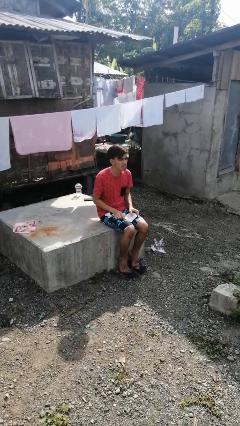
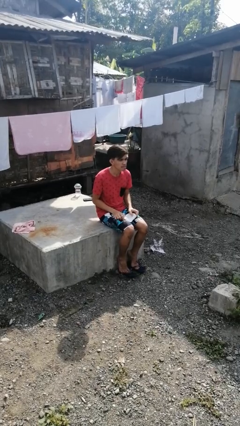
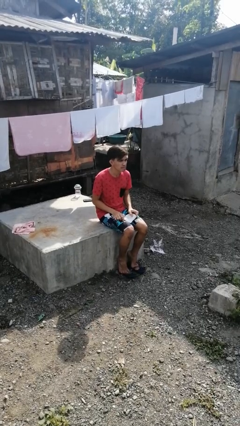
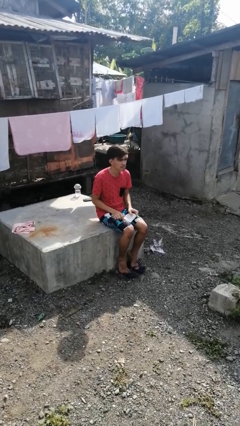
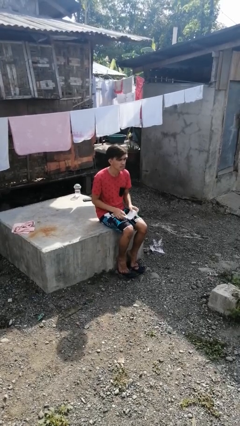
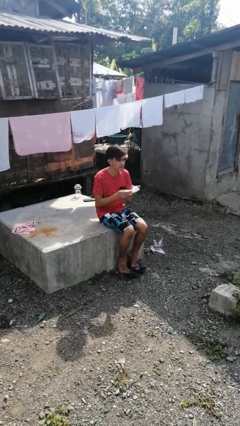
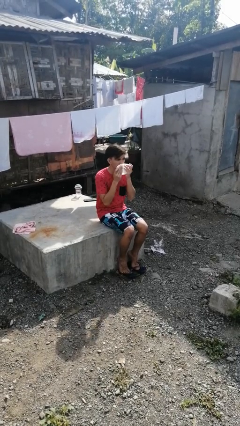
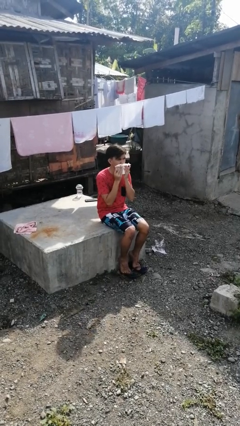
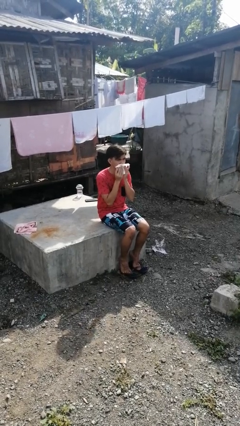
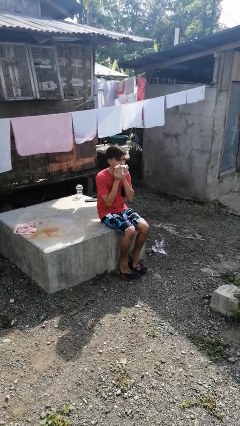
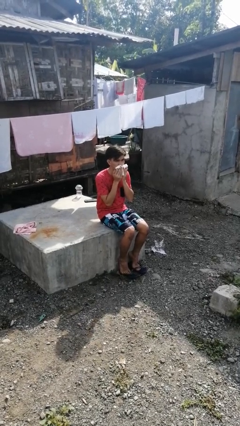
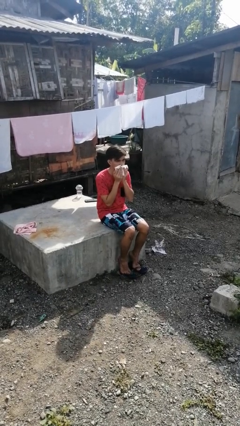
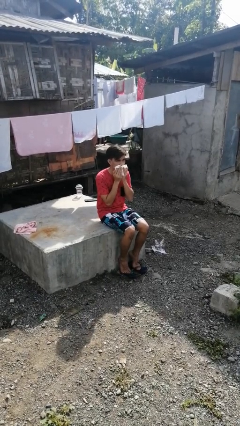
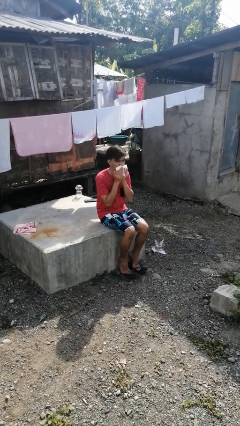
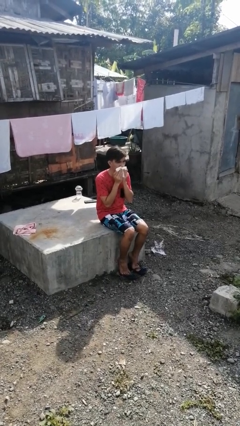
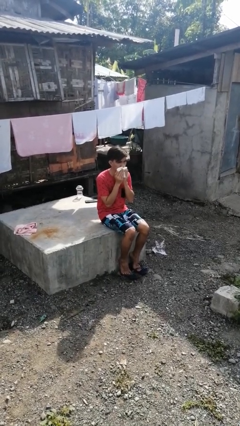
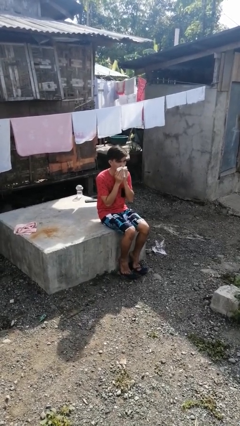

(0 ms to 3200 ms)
person wipes mouth with napkin

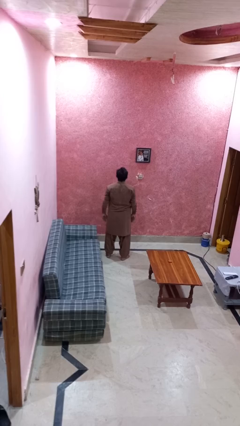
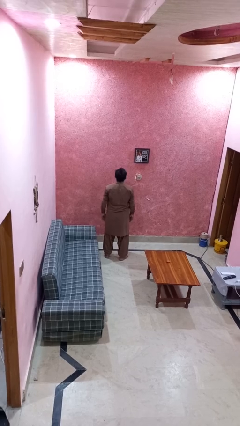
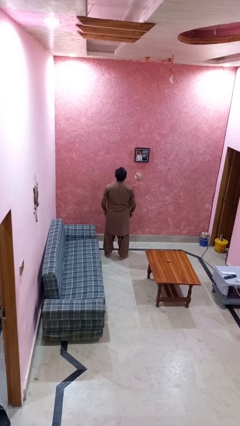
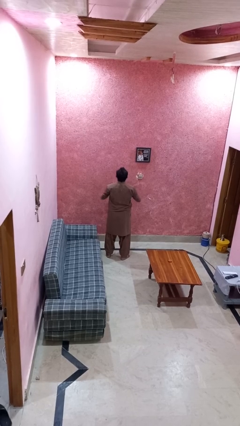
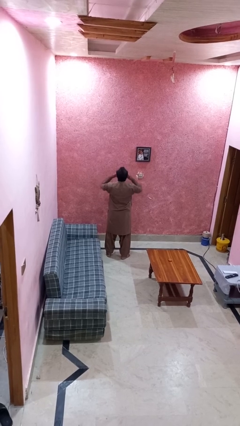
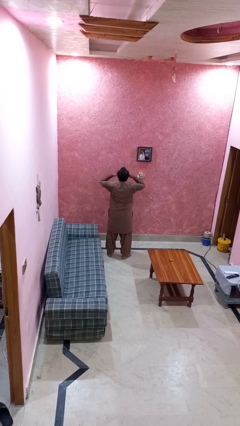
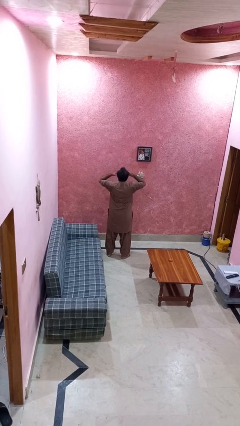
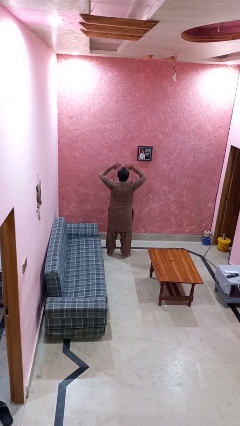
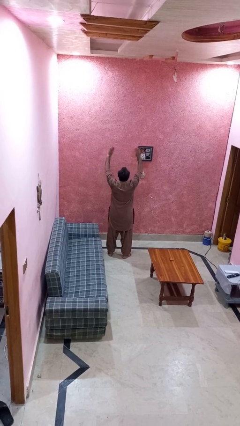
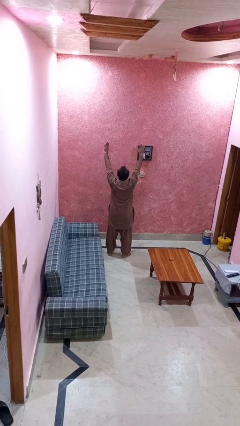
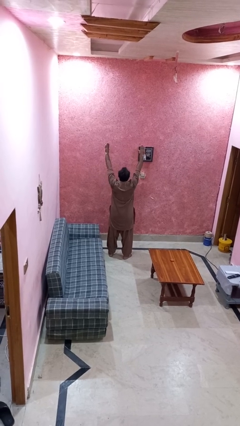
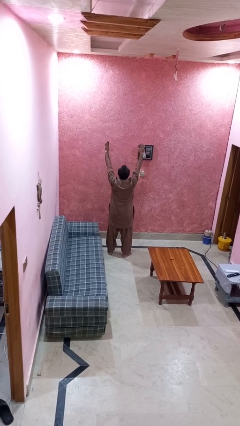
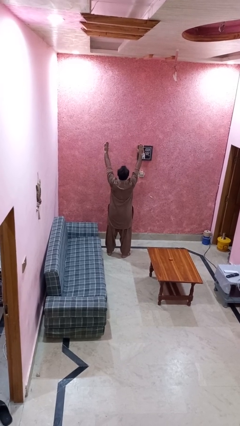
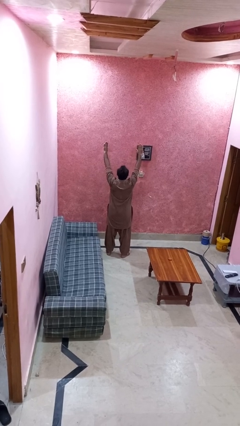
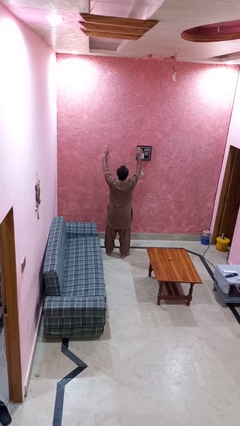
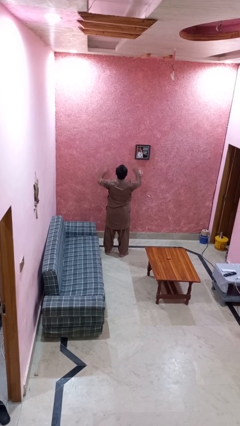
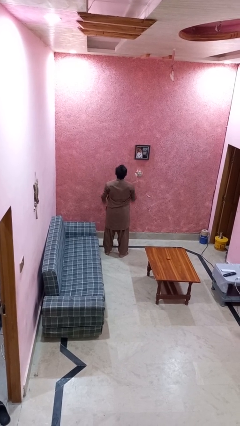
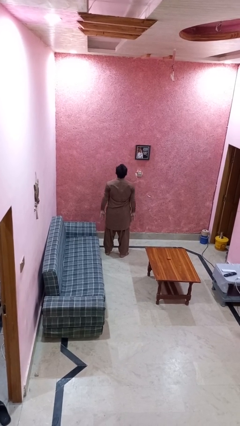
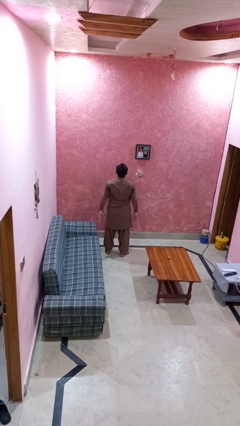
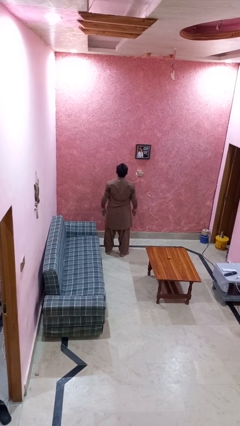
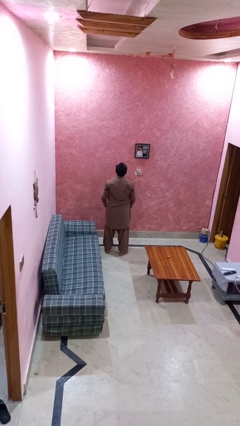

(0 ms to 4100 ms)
person gestures blow kiss

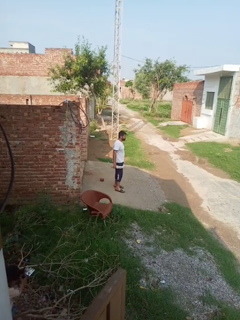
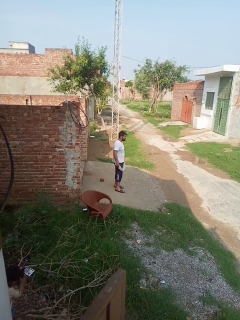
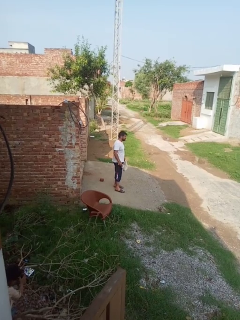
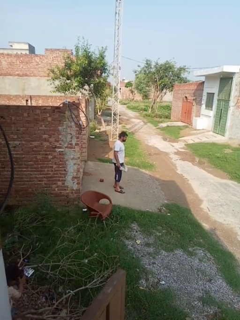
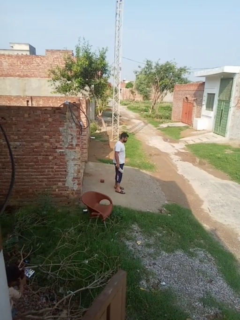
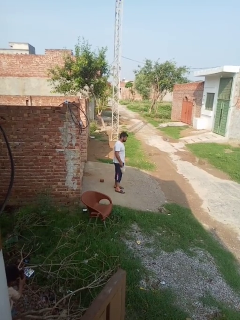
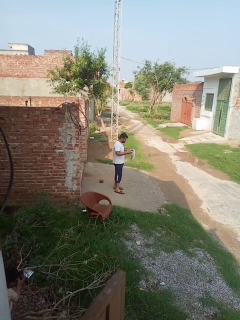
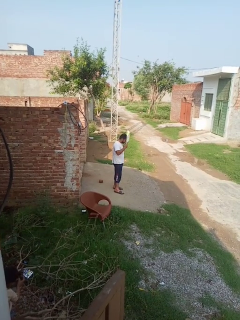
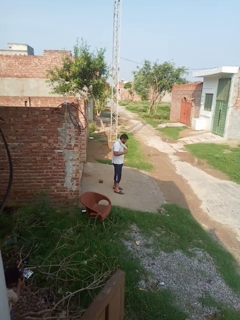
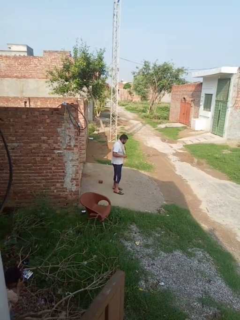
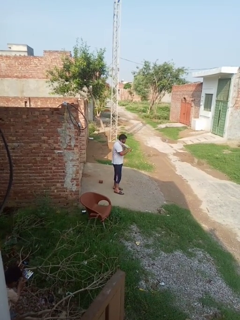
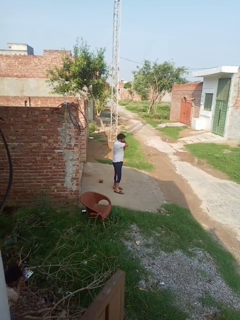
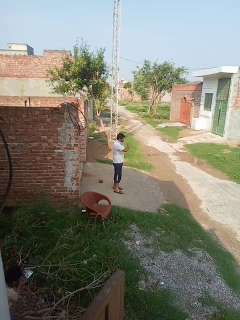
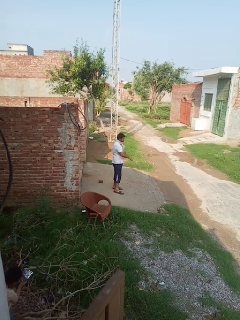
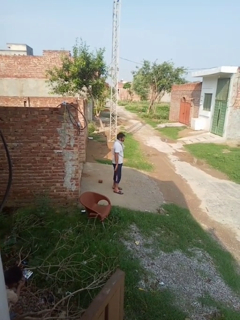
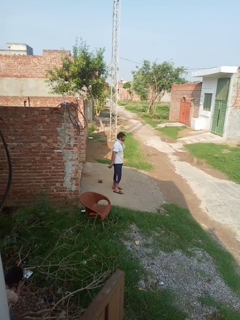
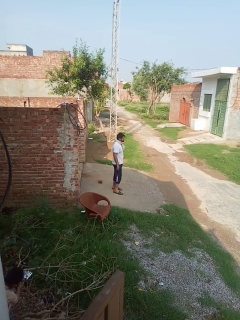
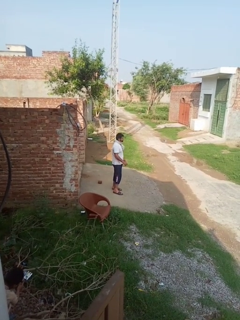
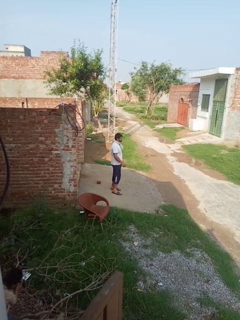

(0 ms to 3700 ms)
person puts on scarf

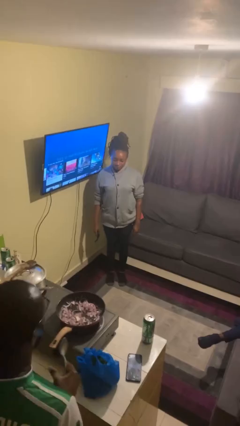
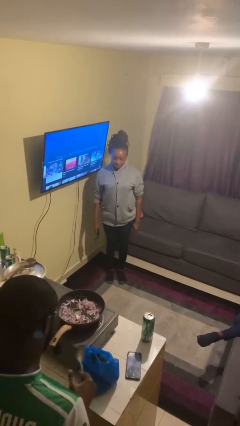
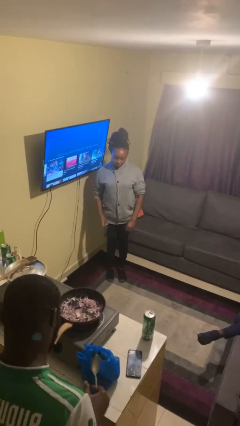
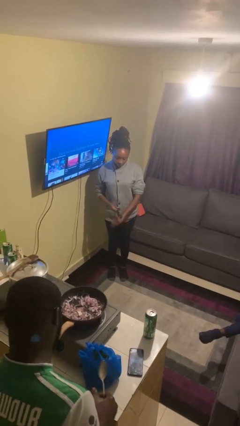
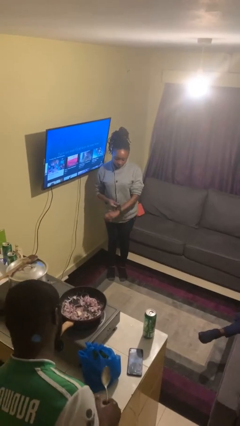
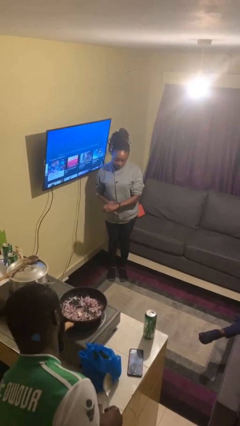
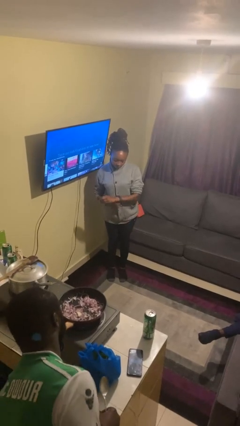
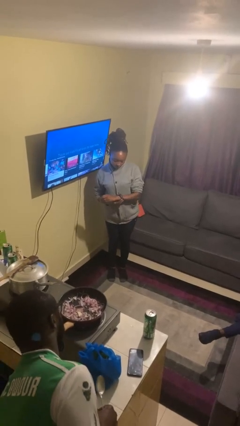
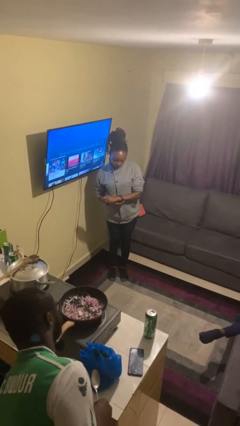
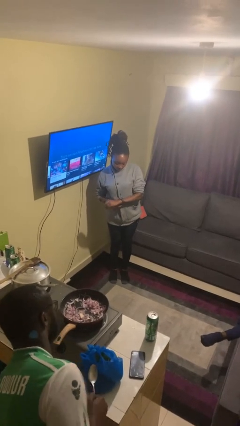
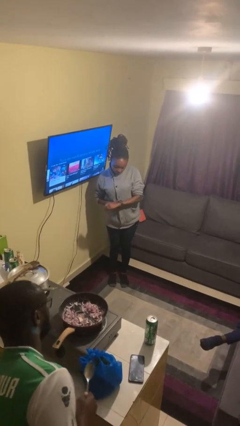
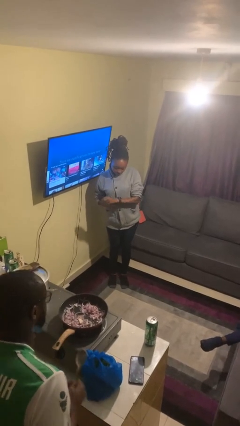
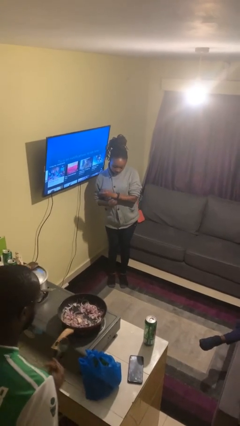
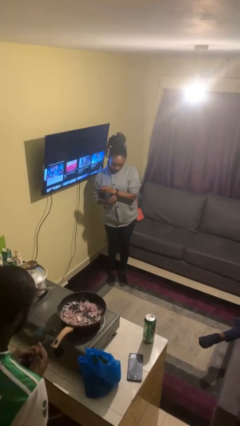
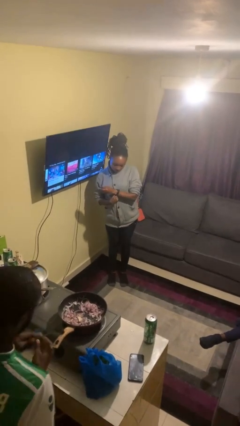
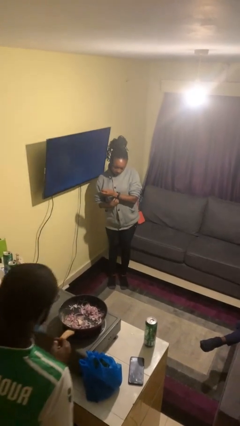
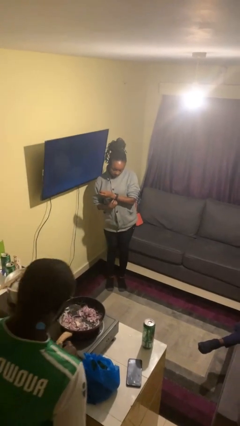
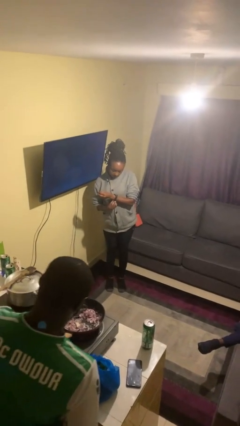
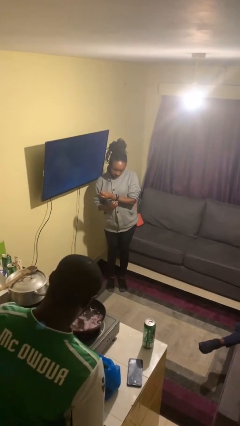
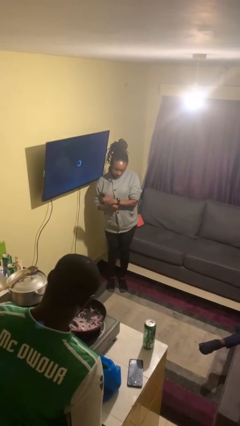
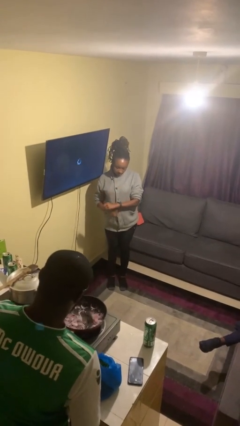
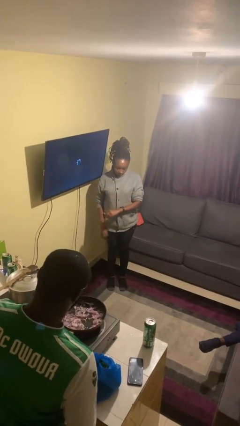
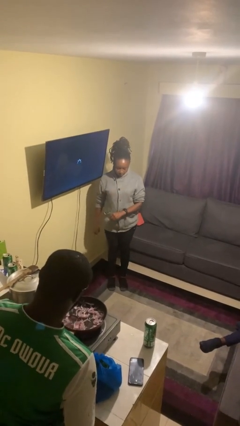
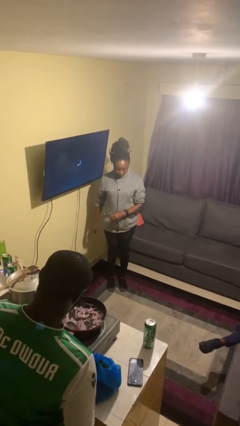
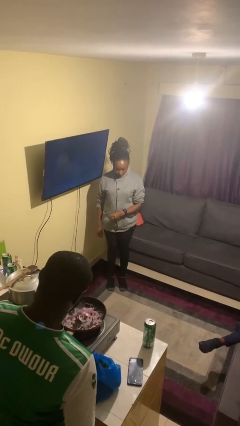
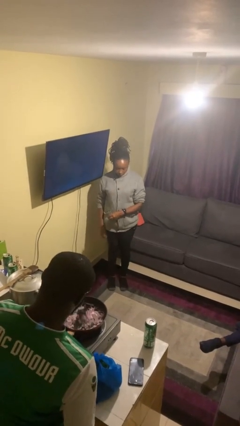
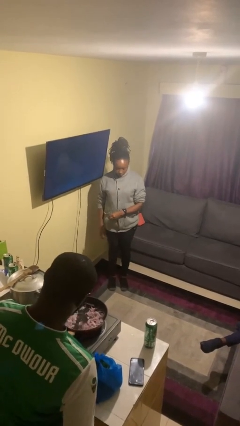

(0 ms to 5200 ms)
person puts on wristwatch

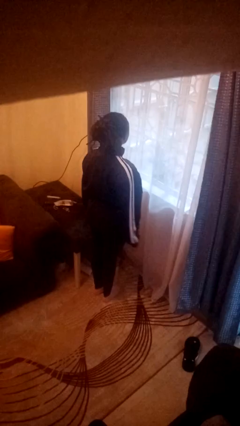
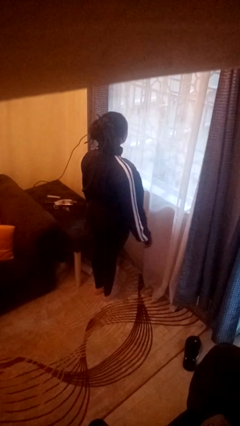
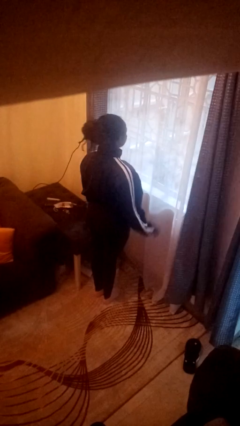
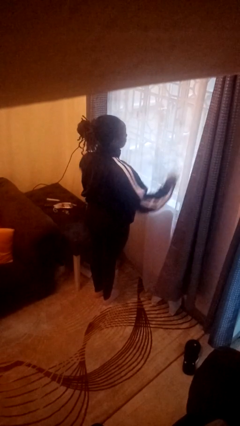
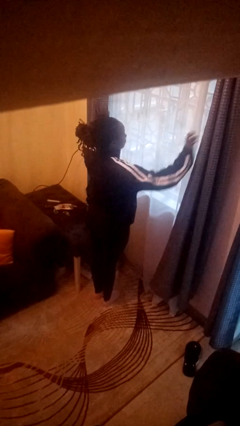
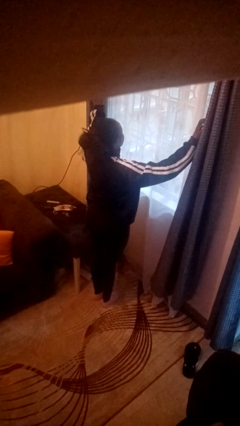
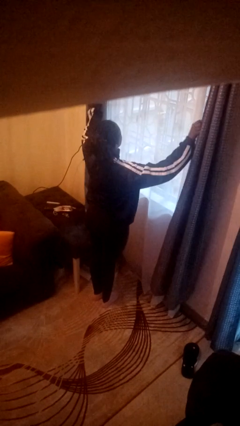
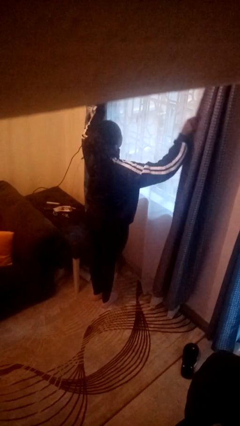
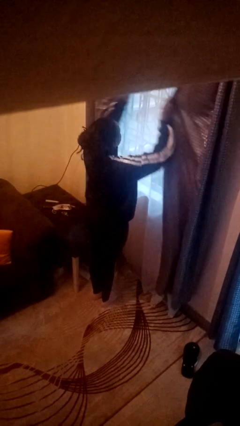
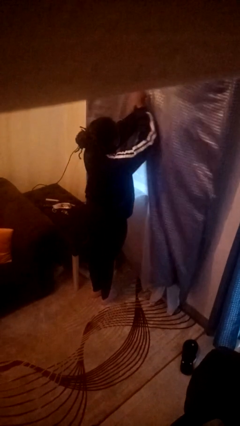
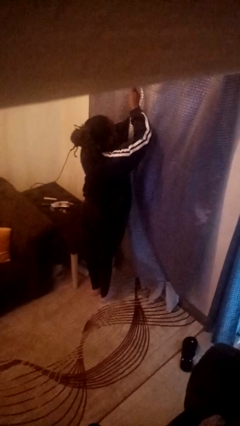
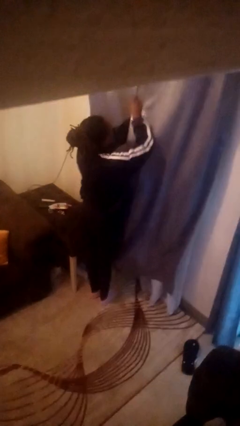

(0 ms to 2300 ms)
person closes curtains
